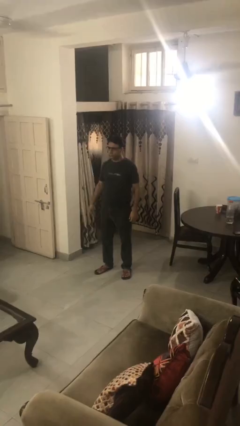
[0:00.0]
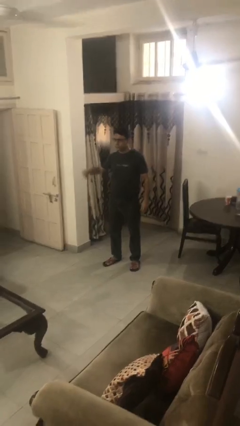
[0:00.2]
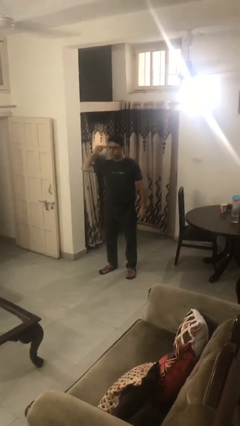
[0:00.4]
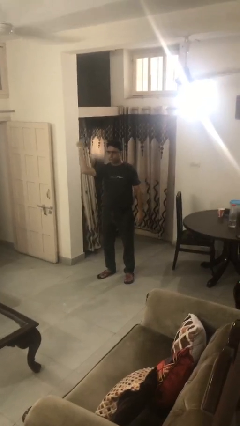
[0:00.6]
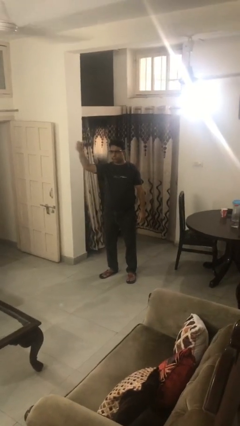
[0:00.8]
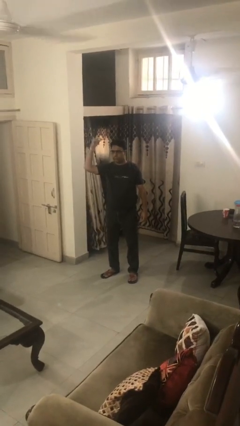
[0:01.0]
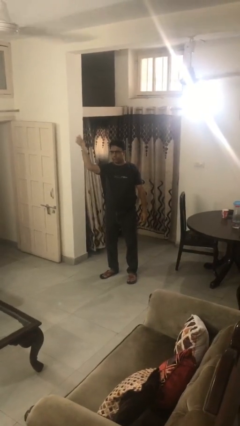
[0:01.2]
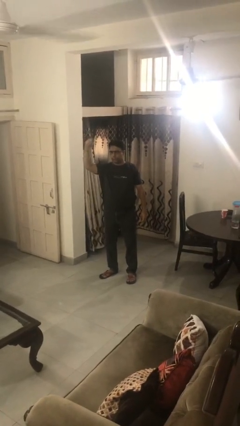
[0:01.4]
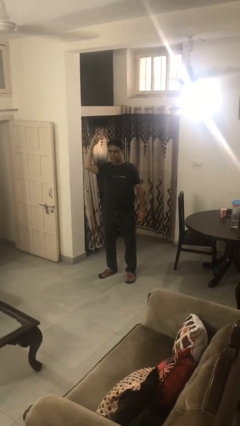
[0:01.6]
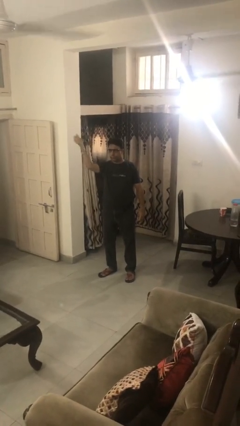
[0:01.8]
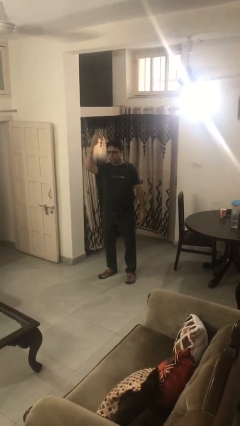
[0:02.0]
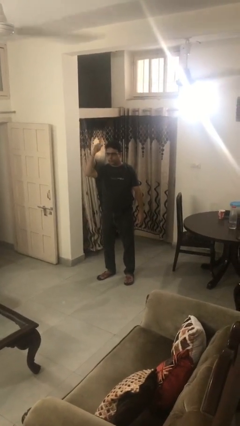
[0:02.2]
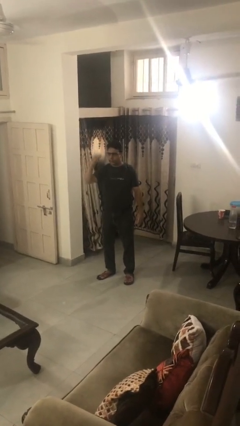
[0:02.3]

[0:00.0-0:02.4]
person snaps fingers

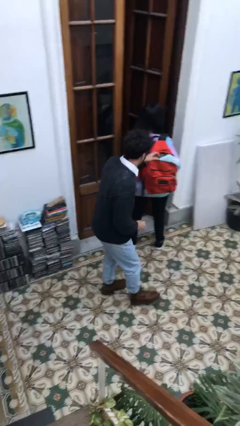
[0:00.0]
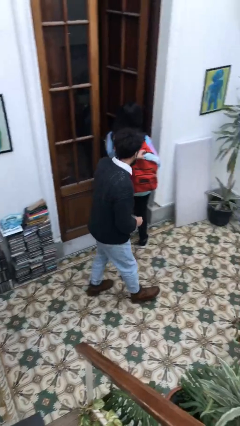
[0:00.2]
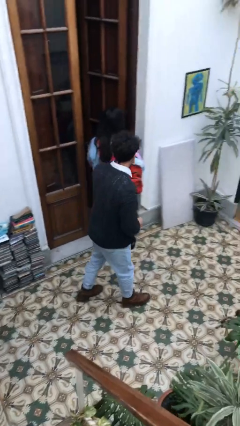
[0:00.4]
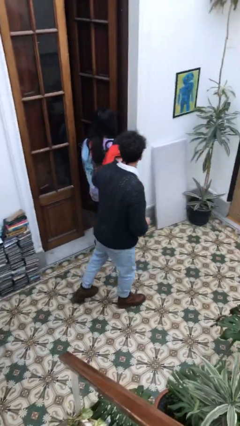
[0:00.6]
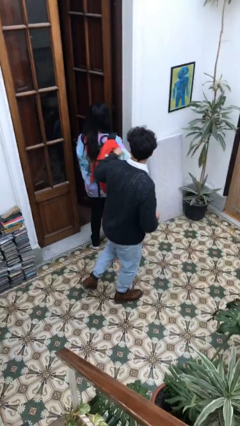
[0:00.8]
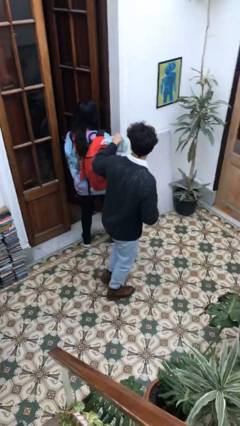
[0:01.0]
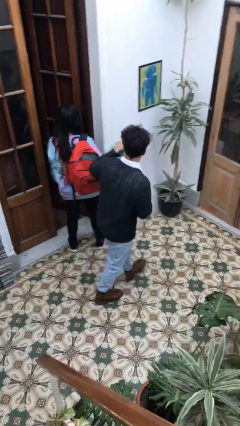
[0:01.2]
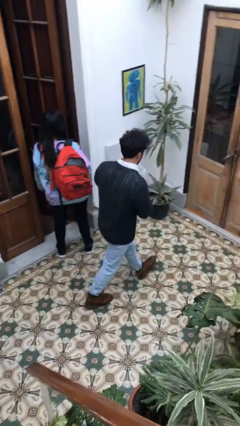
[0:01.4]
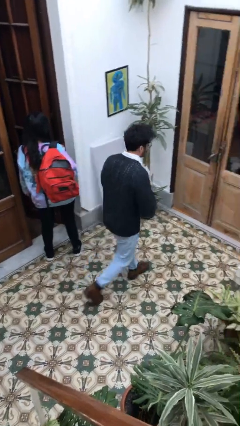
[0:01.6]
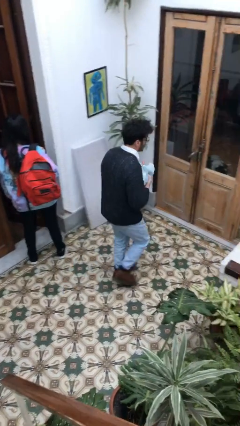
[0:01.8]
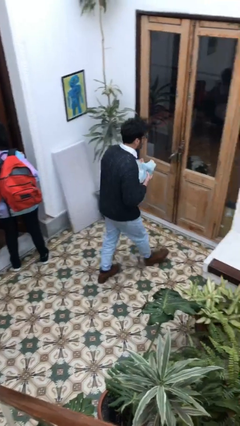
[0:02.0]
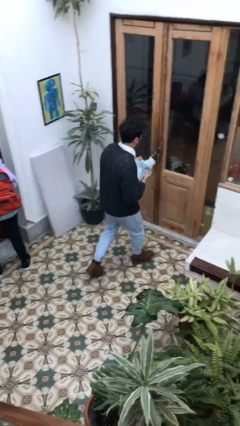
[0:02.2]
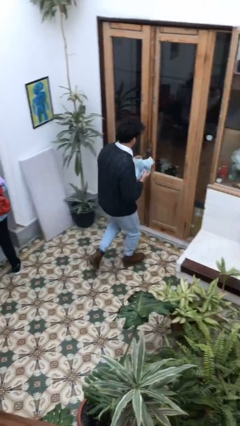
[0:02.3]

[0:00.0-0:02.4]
person steals object from person

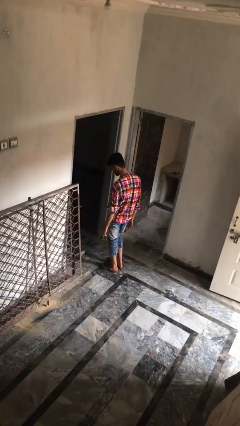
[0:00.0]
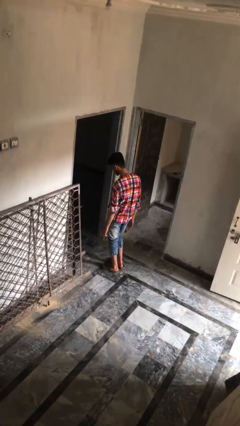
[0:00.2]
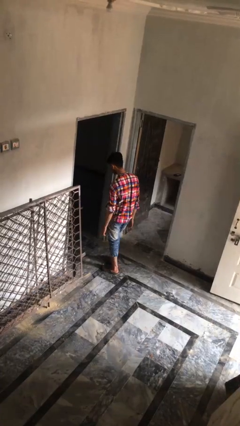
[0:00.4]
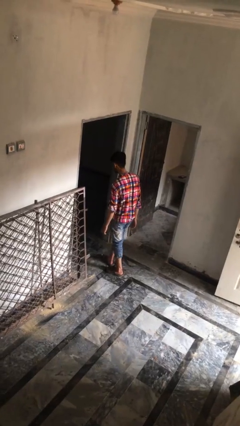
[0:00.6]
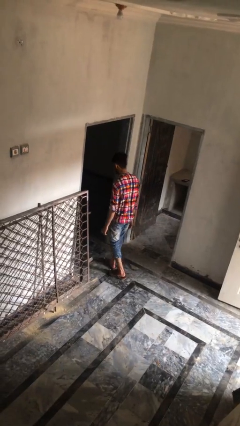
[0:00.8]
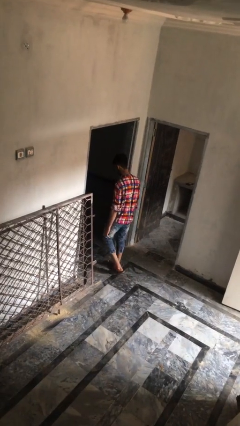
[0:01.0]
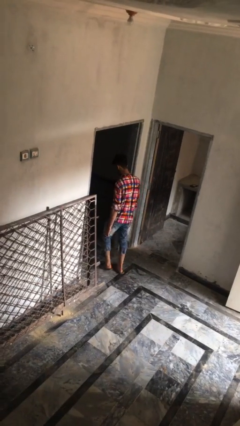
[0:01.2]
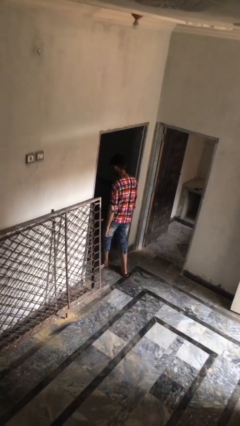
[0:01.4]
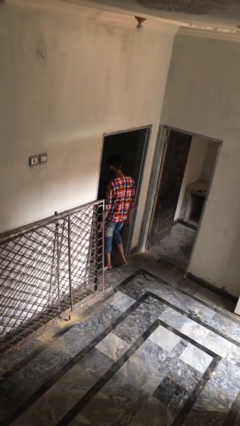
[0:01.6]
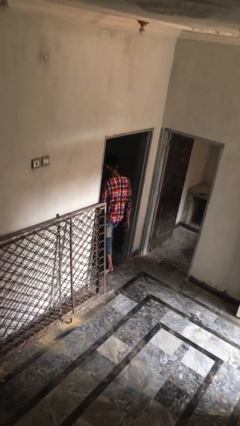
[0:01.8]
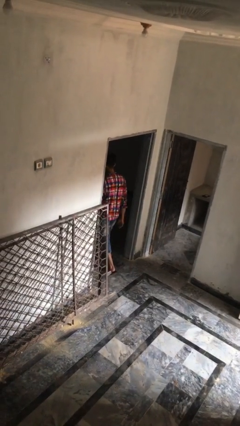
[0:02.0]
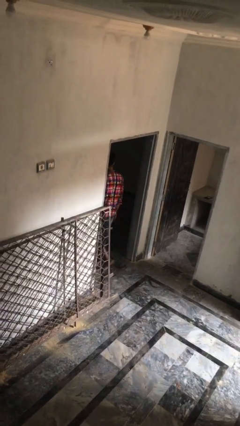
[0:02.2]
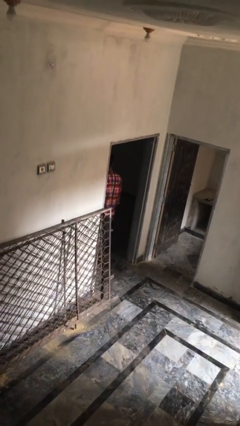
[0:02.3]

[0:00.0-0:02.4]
person exits scene through structure

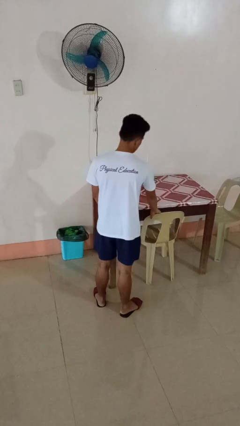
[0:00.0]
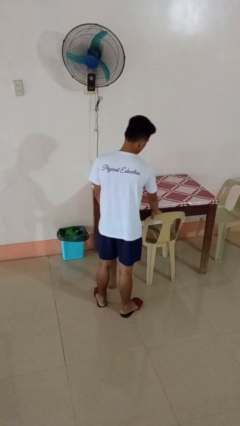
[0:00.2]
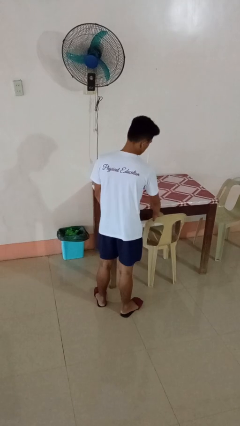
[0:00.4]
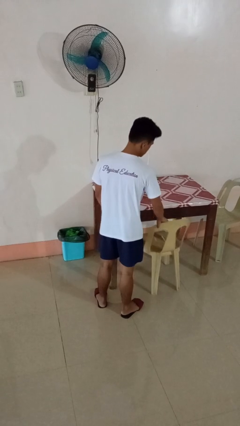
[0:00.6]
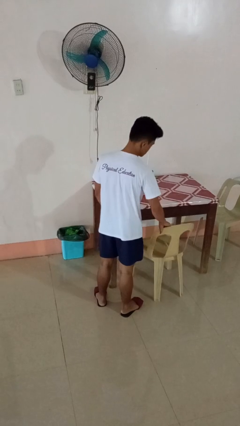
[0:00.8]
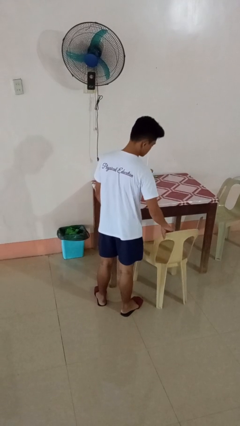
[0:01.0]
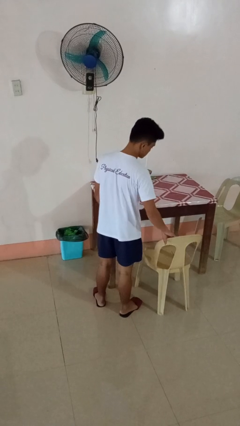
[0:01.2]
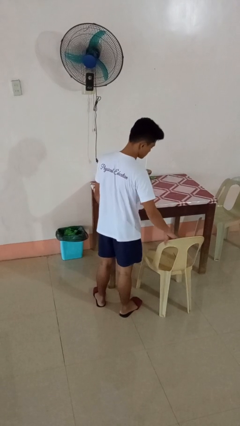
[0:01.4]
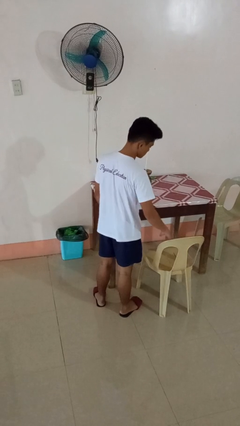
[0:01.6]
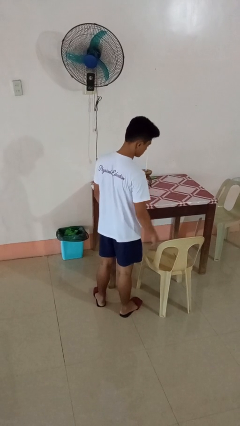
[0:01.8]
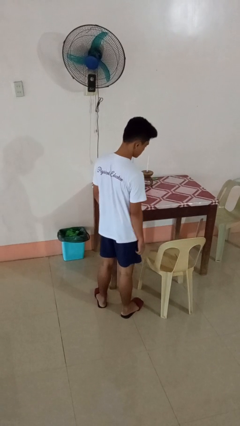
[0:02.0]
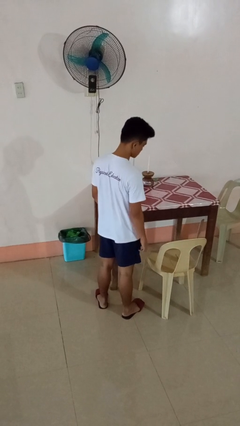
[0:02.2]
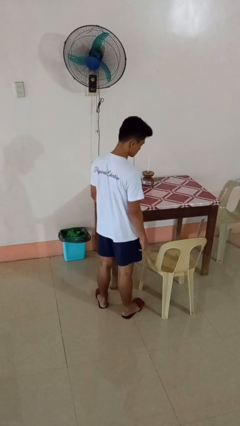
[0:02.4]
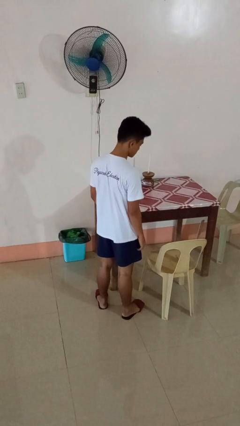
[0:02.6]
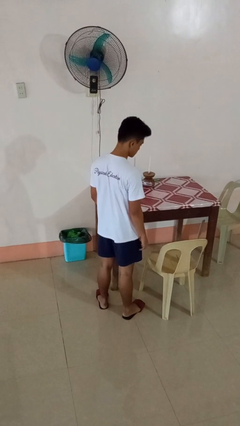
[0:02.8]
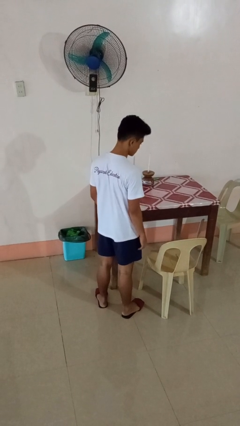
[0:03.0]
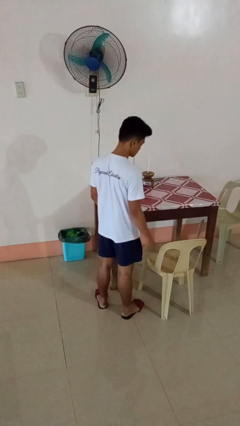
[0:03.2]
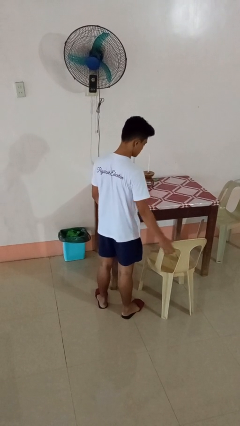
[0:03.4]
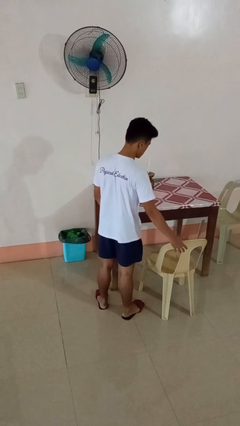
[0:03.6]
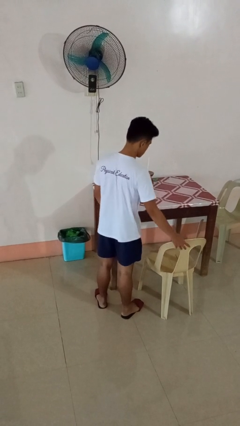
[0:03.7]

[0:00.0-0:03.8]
person pulls out chair

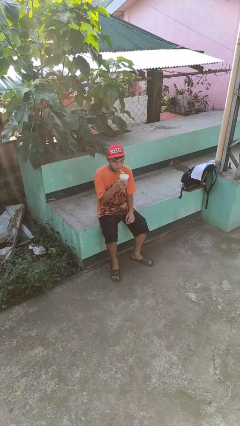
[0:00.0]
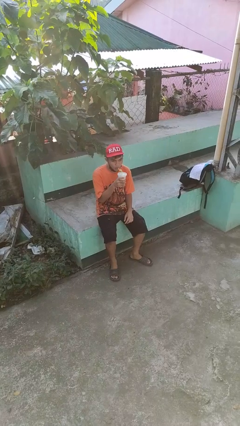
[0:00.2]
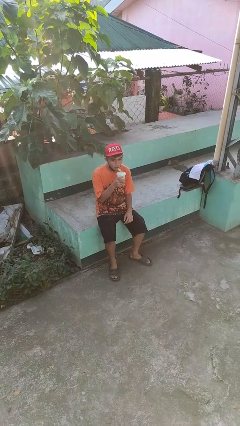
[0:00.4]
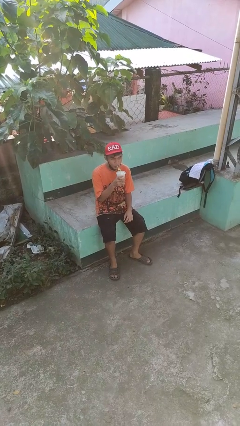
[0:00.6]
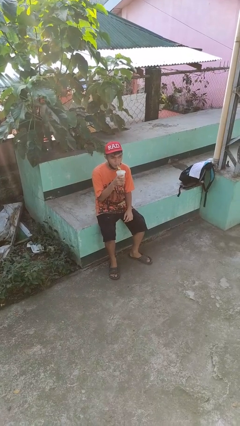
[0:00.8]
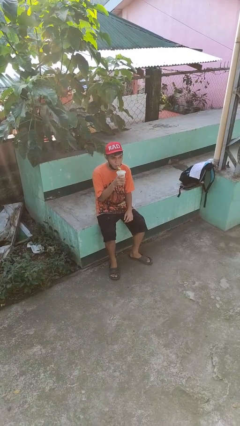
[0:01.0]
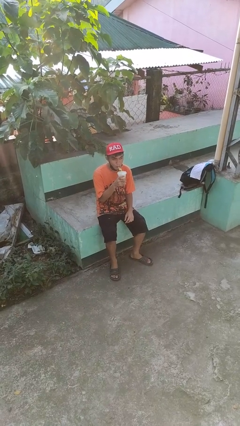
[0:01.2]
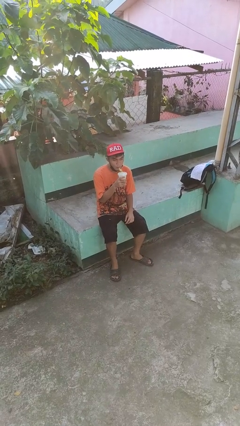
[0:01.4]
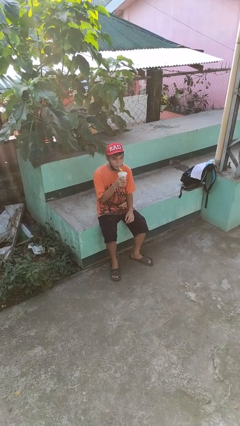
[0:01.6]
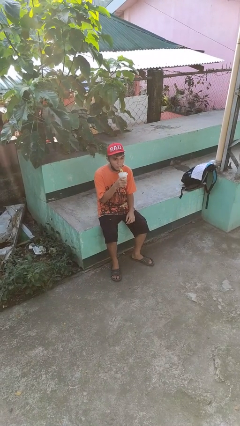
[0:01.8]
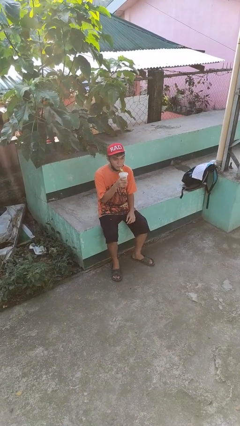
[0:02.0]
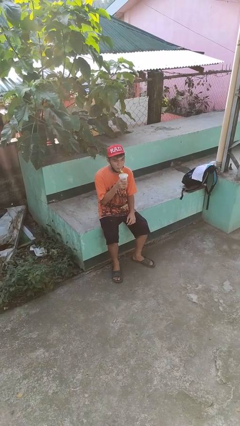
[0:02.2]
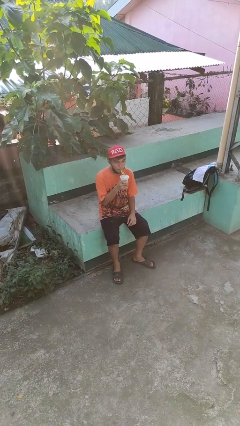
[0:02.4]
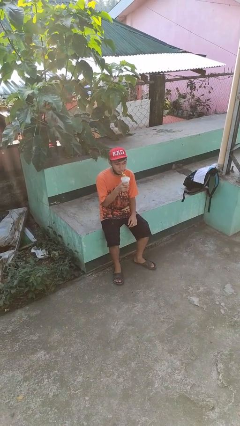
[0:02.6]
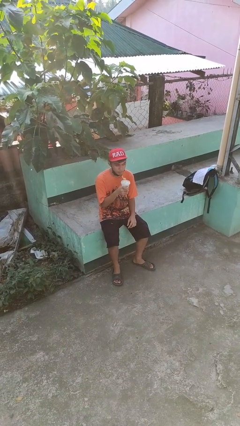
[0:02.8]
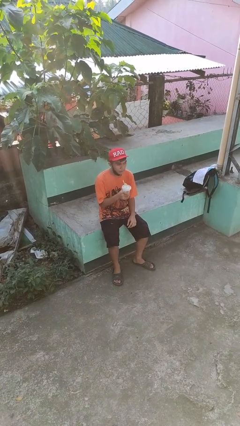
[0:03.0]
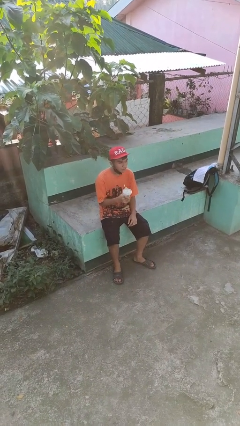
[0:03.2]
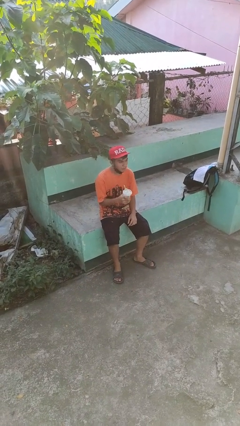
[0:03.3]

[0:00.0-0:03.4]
person drinks from straw

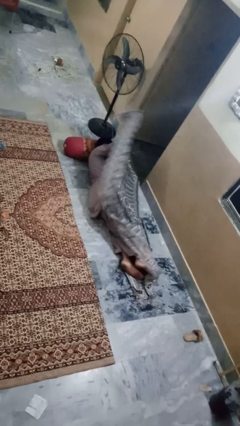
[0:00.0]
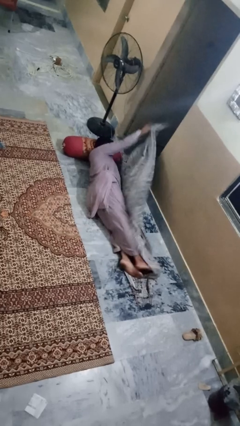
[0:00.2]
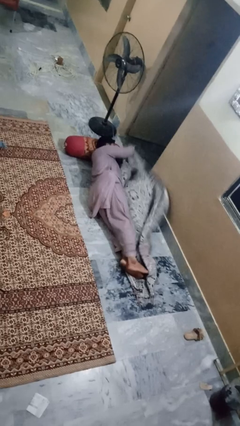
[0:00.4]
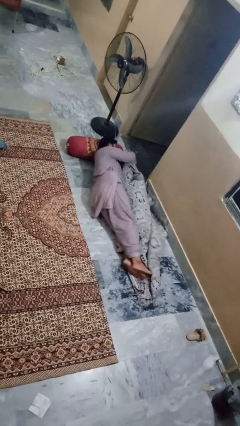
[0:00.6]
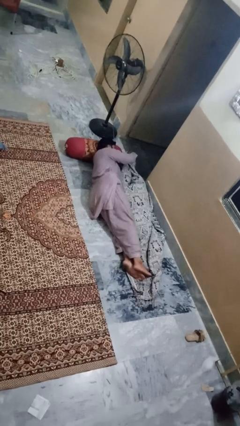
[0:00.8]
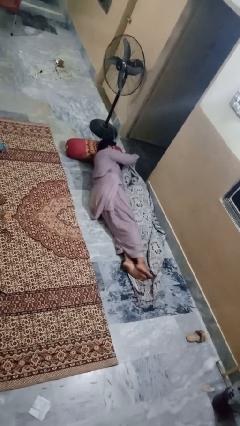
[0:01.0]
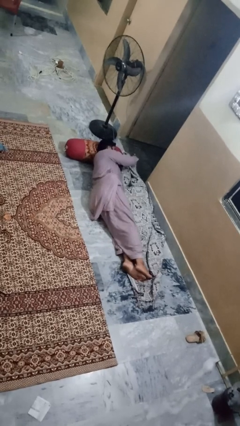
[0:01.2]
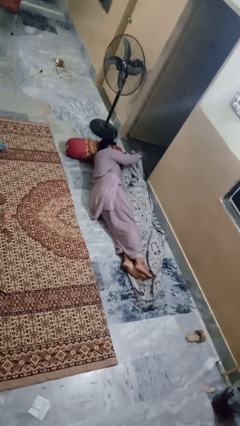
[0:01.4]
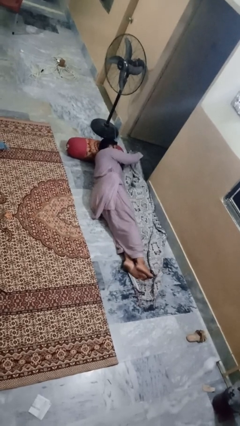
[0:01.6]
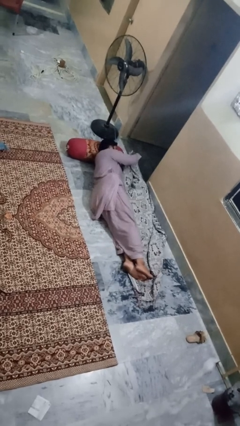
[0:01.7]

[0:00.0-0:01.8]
person uncovers with blanket

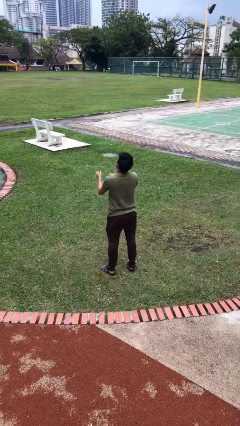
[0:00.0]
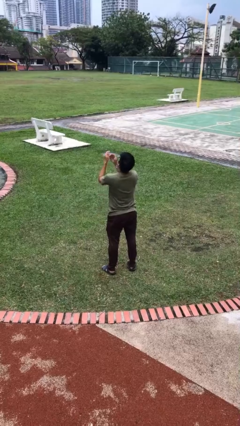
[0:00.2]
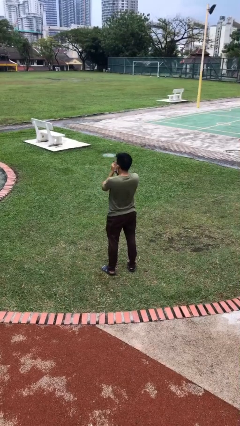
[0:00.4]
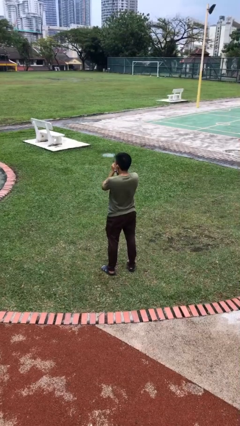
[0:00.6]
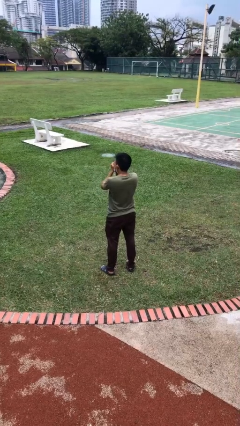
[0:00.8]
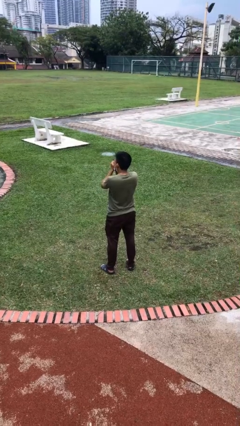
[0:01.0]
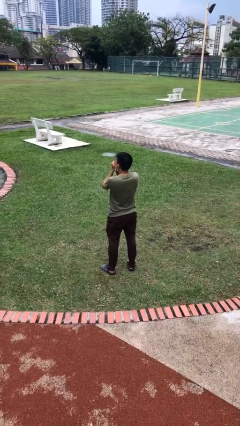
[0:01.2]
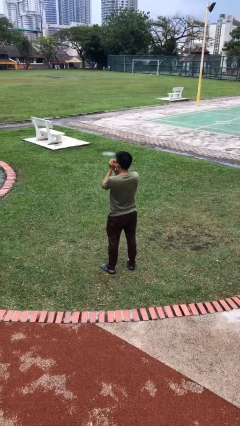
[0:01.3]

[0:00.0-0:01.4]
person sneezes into hand
